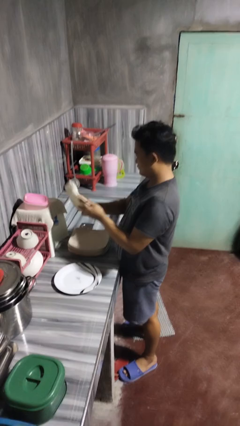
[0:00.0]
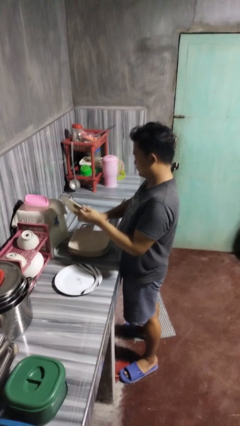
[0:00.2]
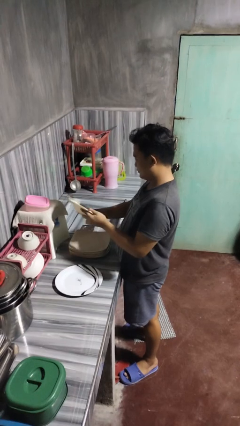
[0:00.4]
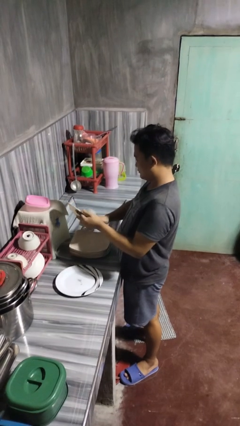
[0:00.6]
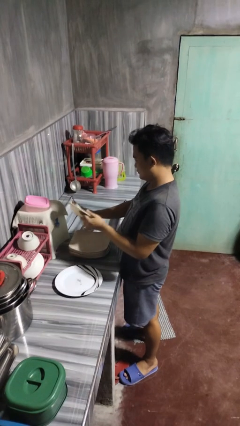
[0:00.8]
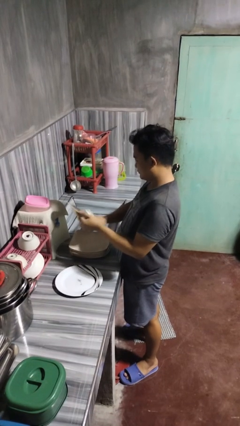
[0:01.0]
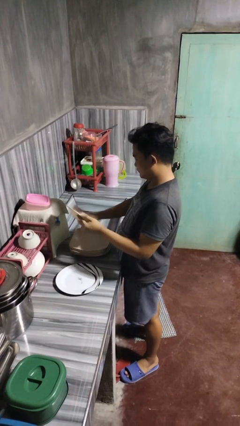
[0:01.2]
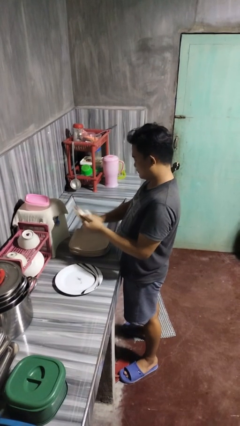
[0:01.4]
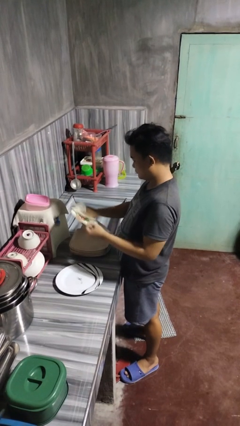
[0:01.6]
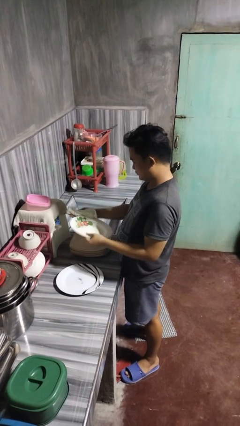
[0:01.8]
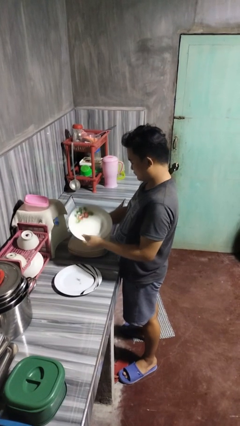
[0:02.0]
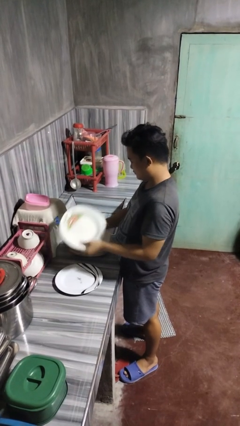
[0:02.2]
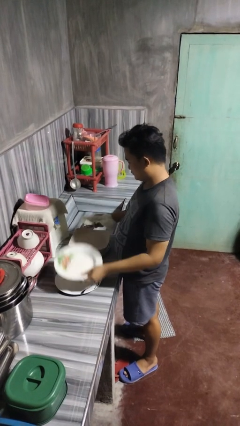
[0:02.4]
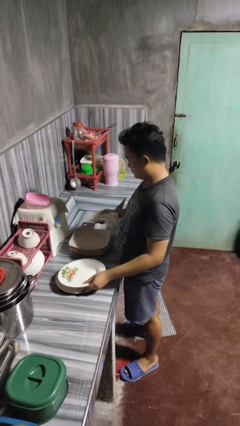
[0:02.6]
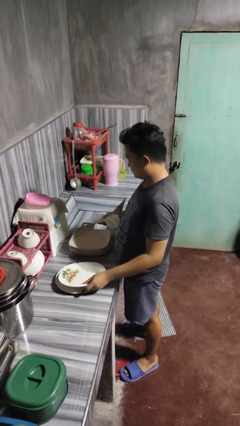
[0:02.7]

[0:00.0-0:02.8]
person dries dish

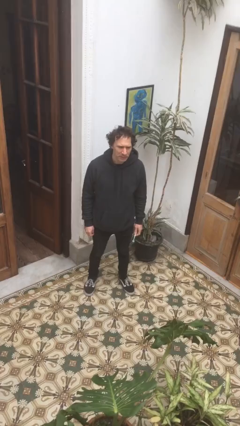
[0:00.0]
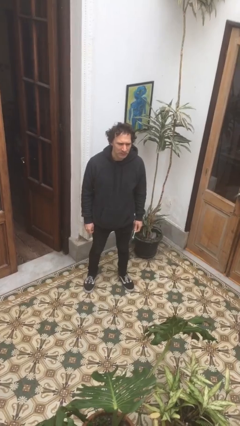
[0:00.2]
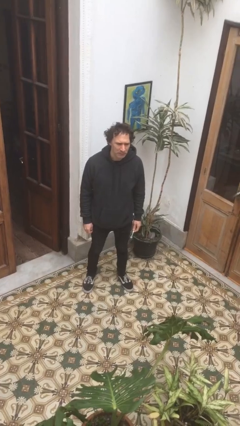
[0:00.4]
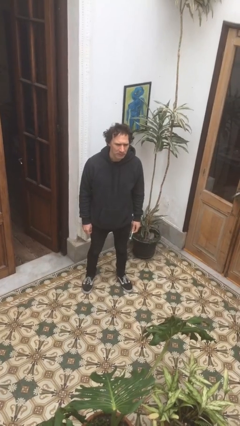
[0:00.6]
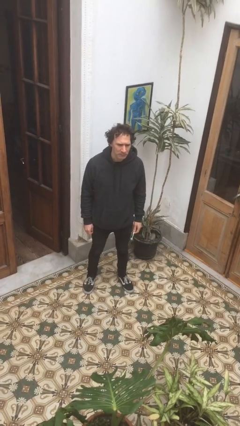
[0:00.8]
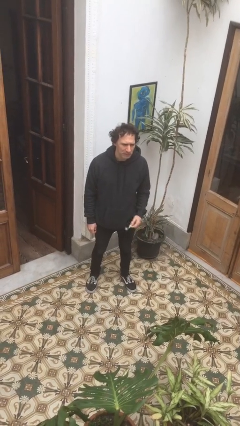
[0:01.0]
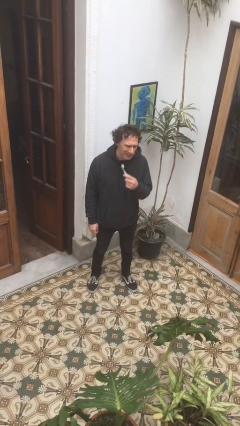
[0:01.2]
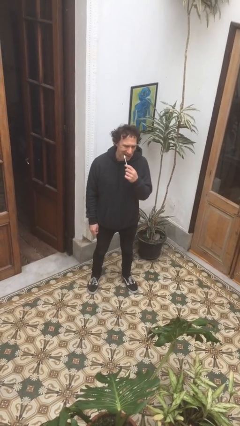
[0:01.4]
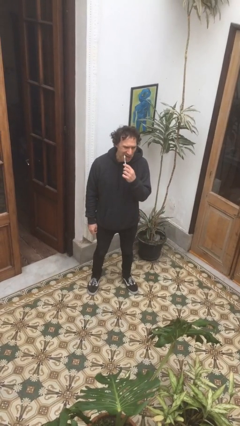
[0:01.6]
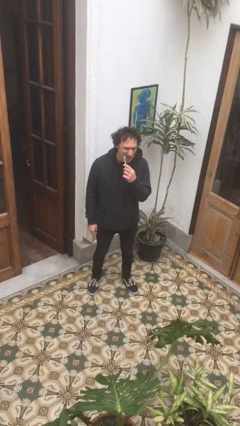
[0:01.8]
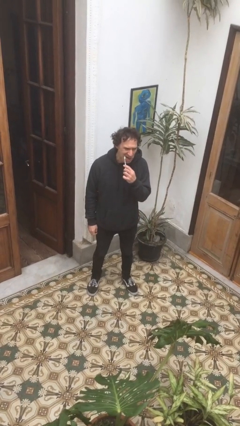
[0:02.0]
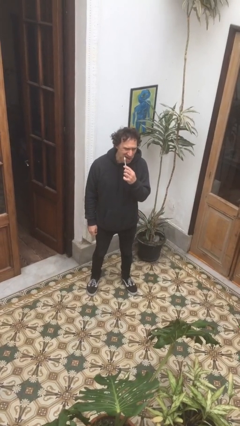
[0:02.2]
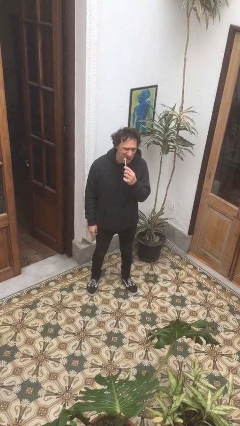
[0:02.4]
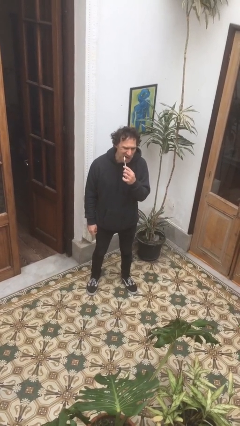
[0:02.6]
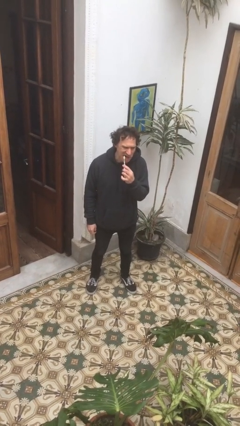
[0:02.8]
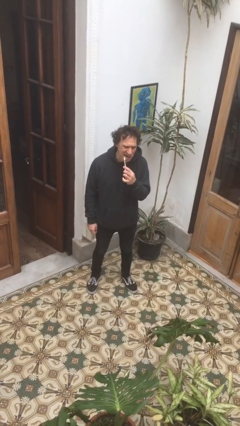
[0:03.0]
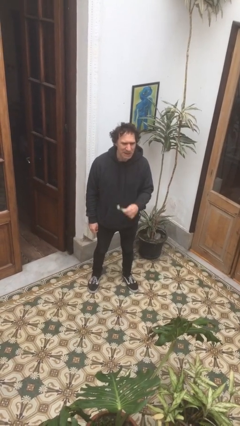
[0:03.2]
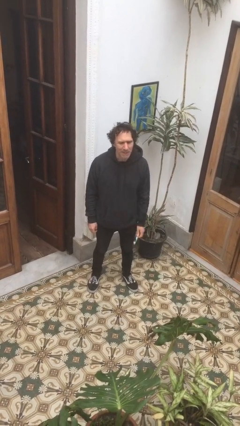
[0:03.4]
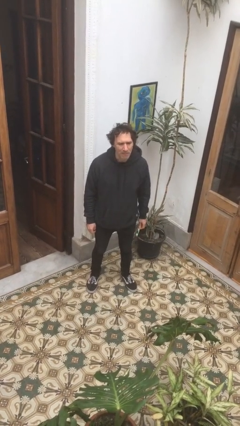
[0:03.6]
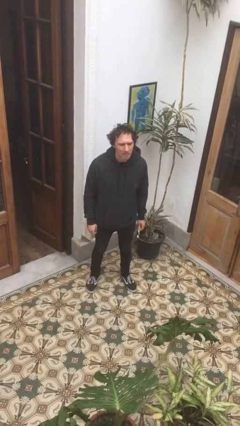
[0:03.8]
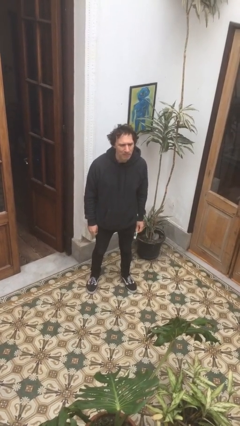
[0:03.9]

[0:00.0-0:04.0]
person brushes teeth

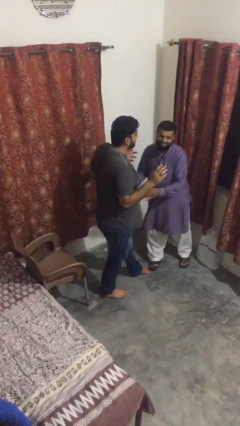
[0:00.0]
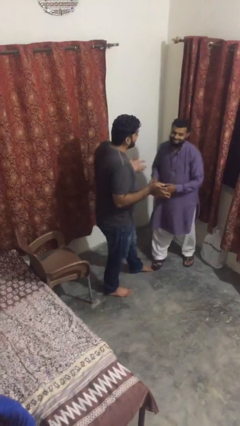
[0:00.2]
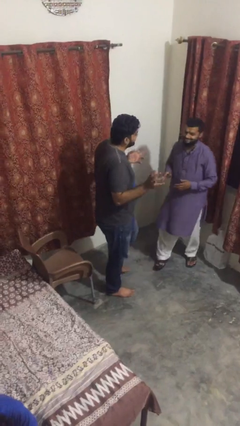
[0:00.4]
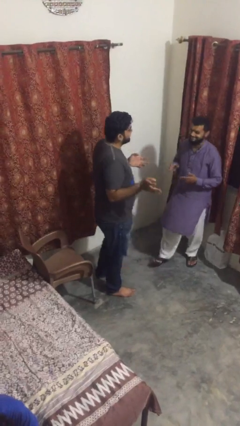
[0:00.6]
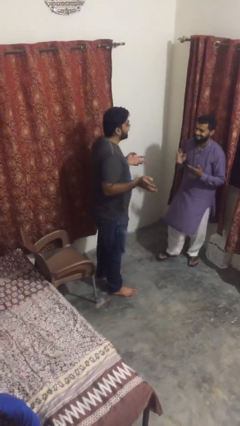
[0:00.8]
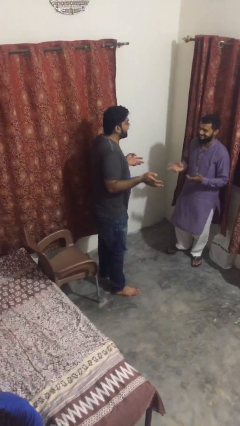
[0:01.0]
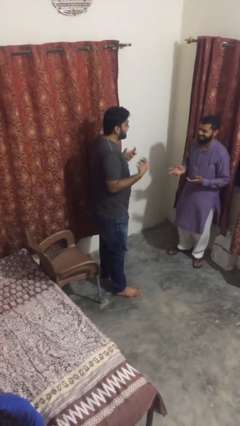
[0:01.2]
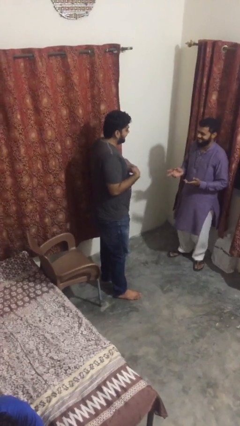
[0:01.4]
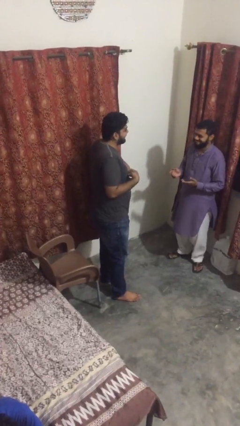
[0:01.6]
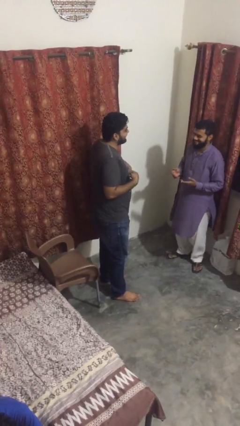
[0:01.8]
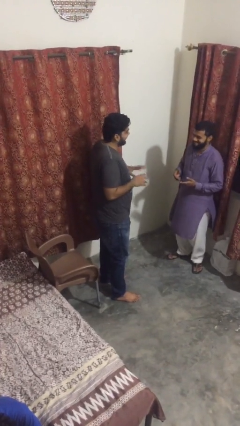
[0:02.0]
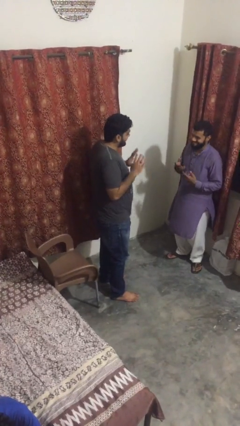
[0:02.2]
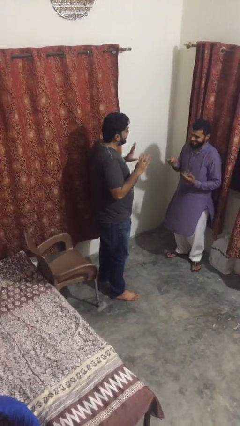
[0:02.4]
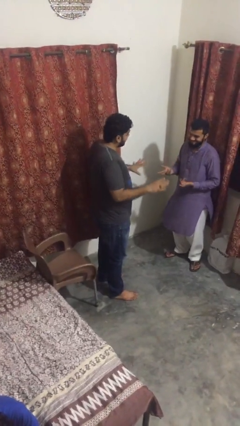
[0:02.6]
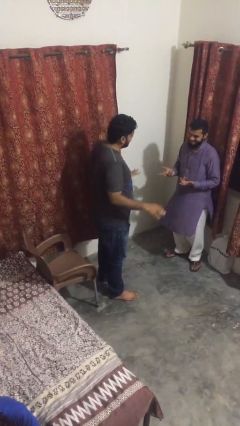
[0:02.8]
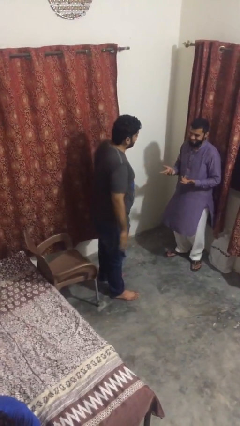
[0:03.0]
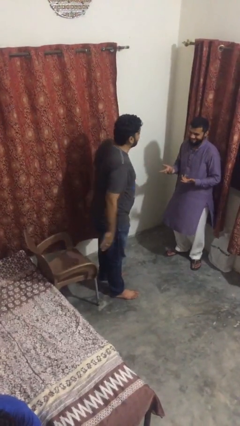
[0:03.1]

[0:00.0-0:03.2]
person talks to person

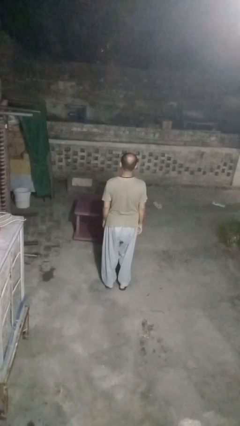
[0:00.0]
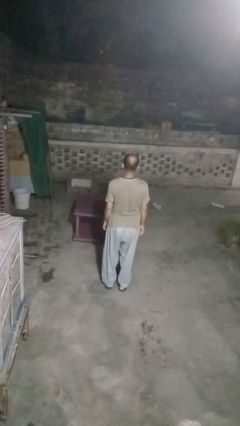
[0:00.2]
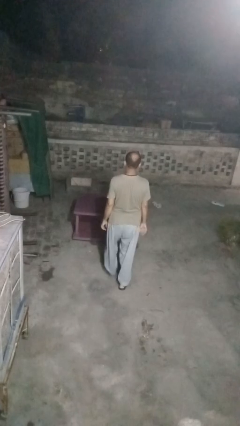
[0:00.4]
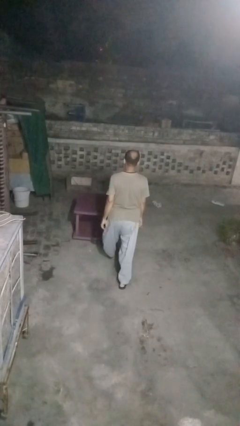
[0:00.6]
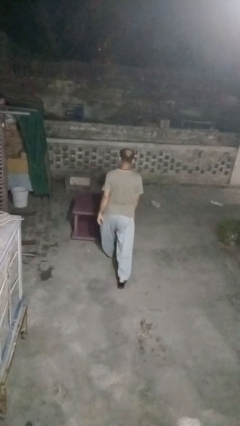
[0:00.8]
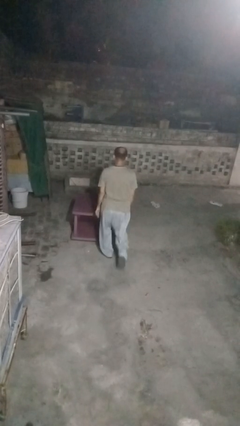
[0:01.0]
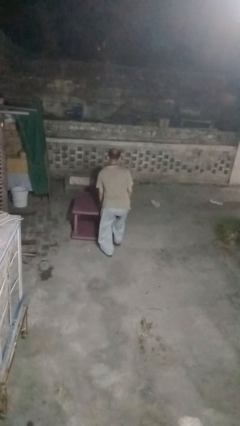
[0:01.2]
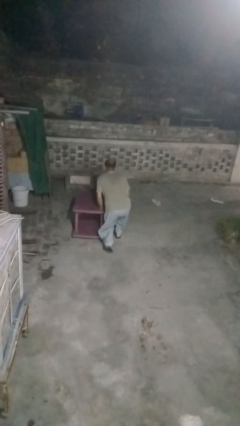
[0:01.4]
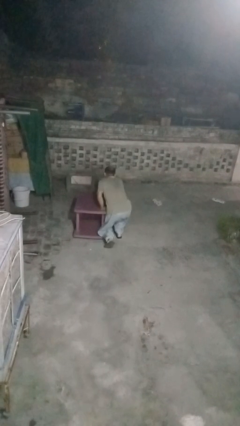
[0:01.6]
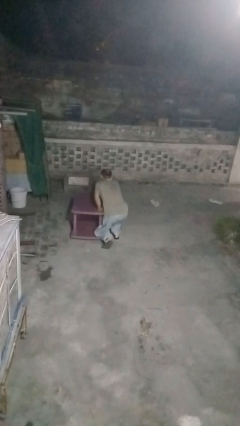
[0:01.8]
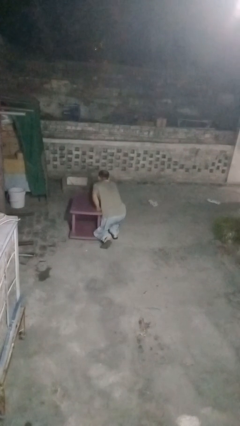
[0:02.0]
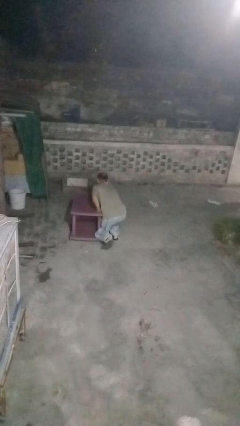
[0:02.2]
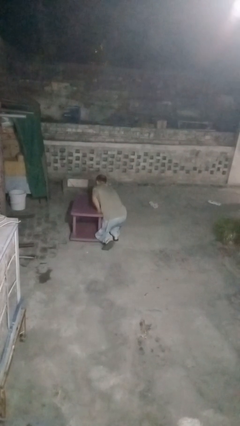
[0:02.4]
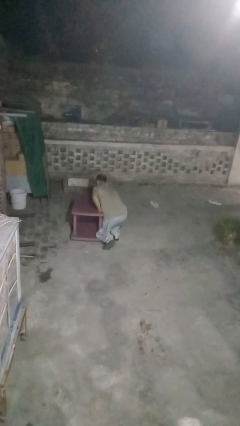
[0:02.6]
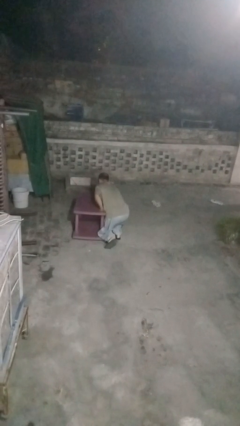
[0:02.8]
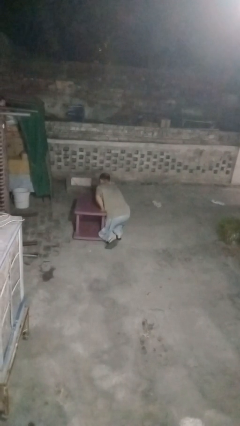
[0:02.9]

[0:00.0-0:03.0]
person bumps into table

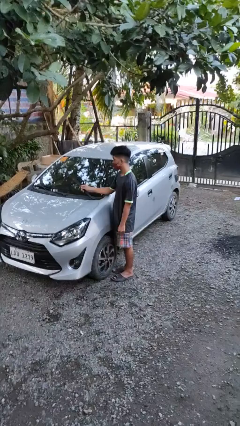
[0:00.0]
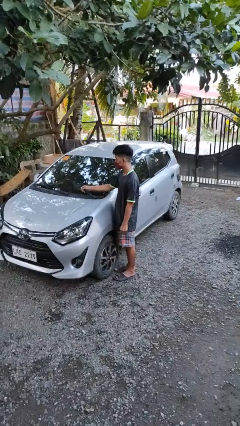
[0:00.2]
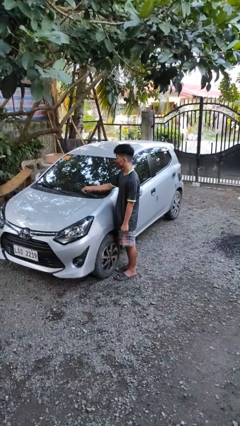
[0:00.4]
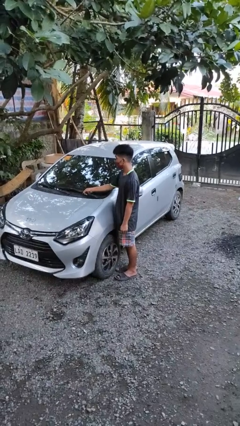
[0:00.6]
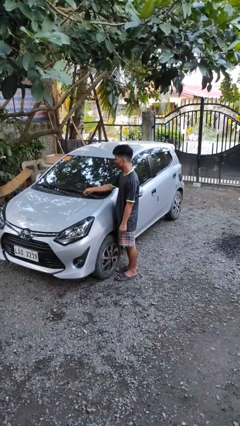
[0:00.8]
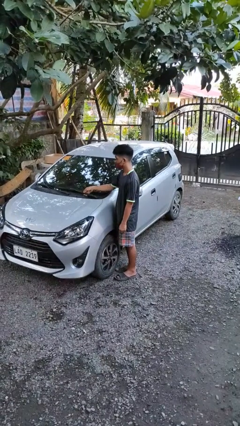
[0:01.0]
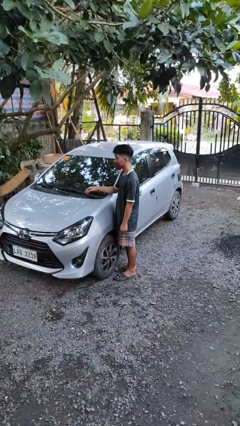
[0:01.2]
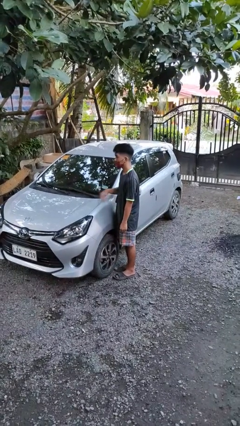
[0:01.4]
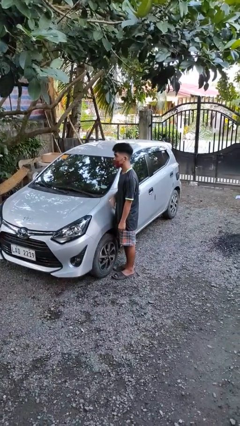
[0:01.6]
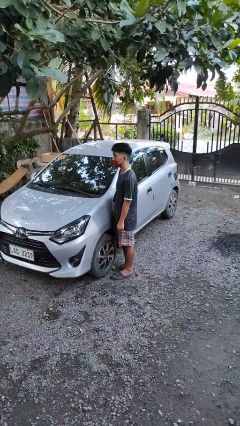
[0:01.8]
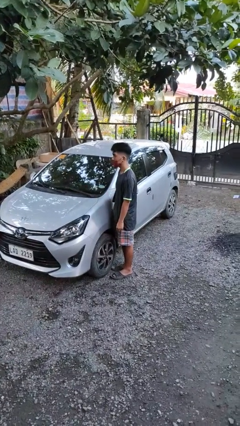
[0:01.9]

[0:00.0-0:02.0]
person flips down car wipers

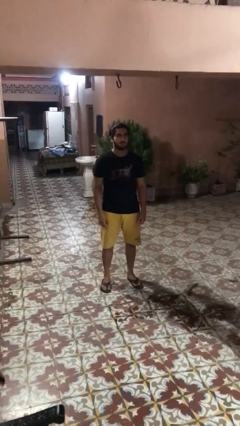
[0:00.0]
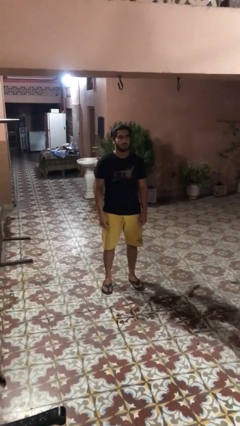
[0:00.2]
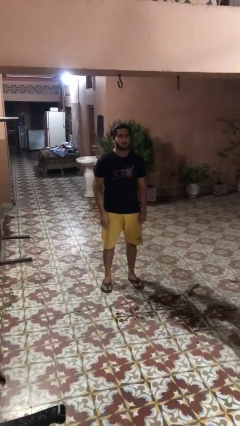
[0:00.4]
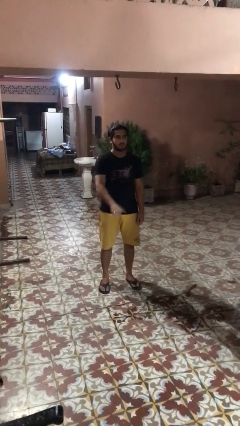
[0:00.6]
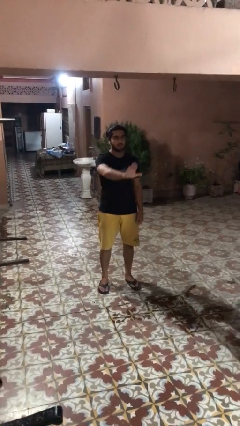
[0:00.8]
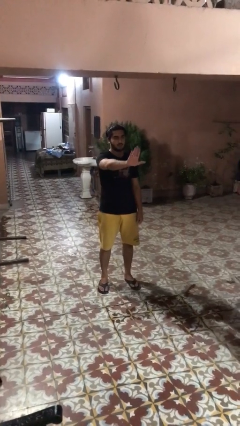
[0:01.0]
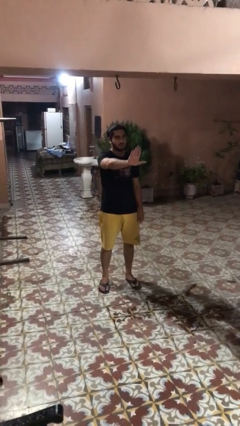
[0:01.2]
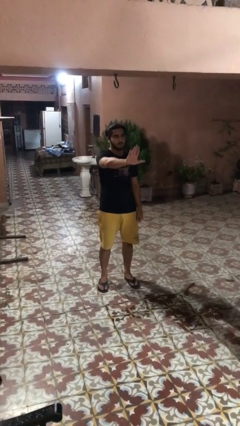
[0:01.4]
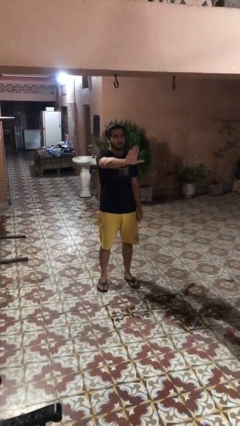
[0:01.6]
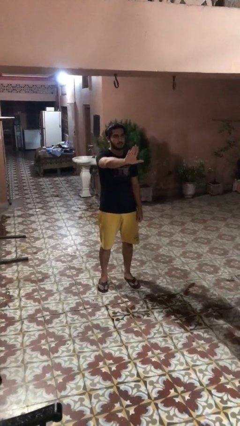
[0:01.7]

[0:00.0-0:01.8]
person gestures stop

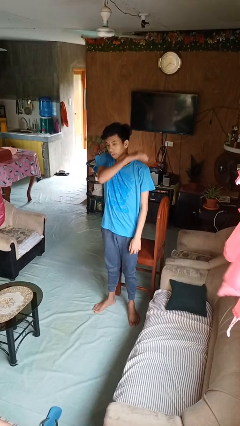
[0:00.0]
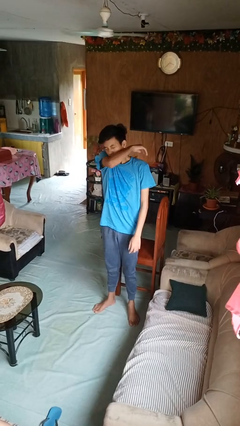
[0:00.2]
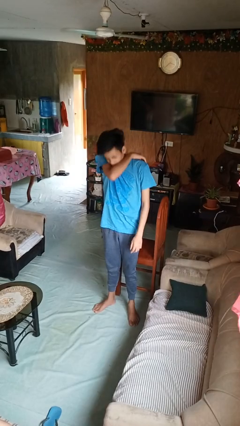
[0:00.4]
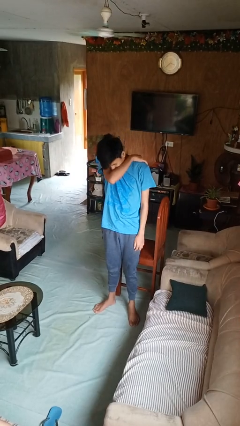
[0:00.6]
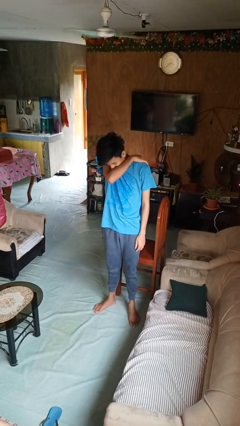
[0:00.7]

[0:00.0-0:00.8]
person sneezes into arm
